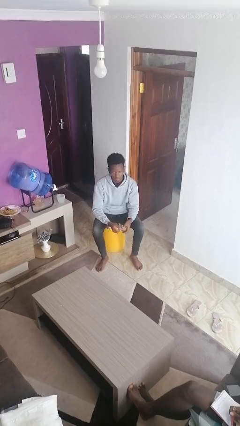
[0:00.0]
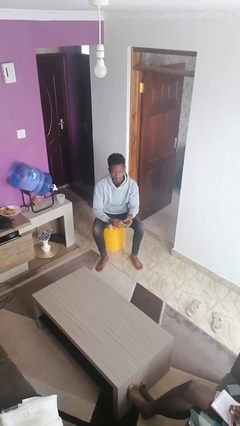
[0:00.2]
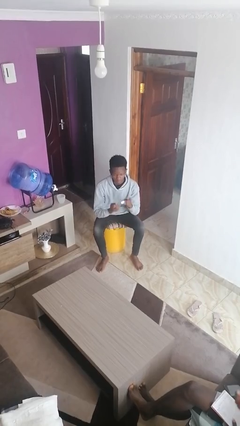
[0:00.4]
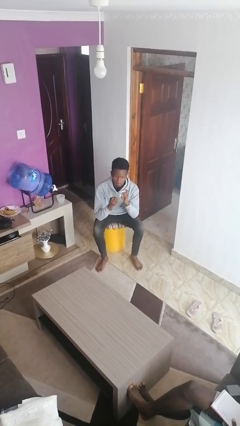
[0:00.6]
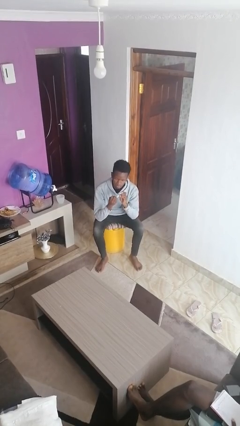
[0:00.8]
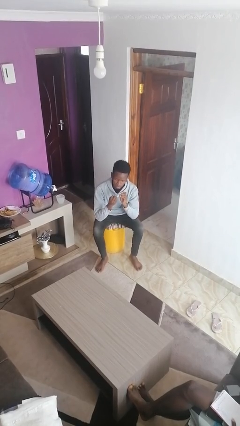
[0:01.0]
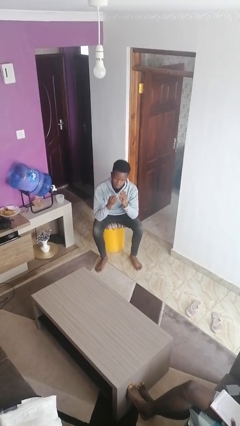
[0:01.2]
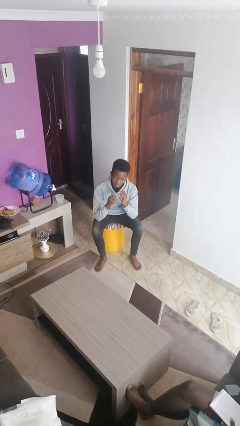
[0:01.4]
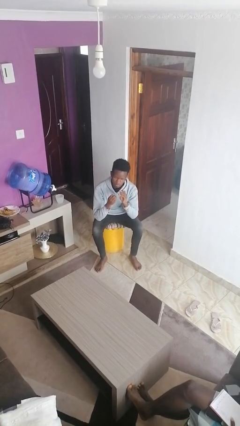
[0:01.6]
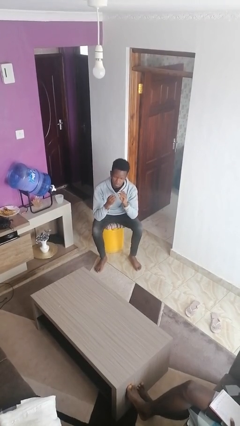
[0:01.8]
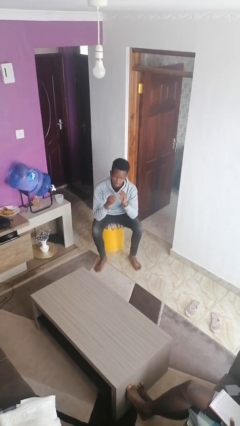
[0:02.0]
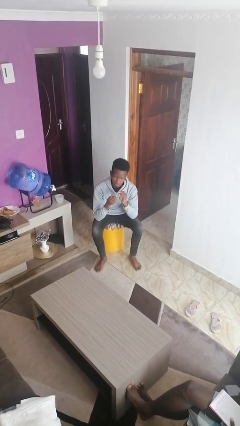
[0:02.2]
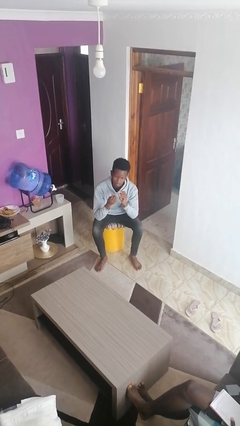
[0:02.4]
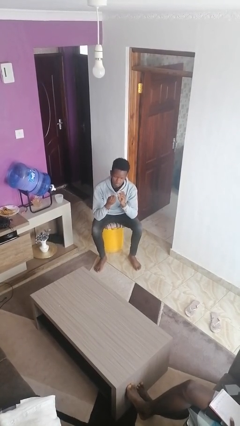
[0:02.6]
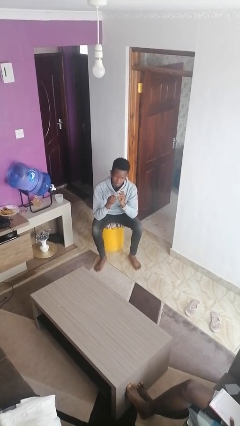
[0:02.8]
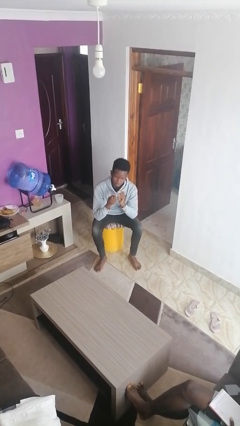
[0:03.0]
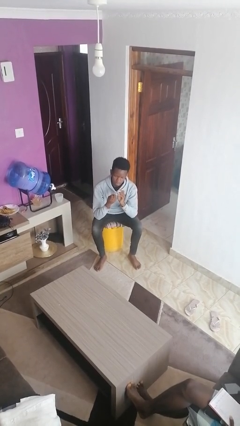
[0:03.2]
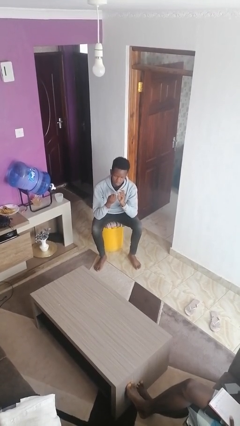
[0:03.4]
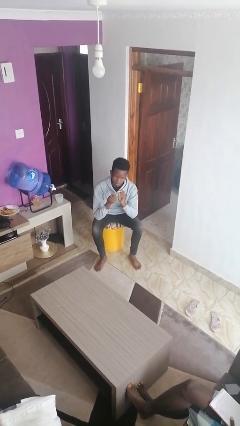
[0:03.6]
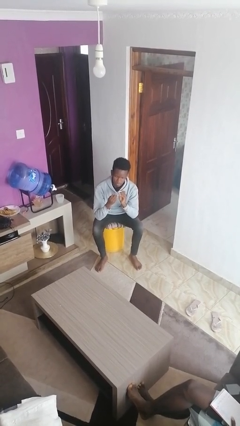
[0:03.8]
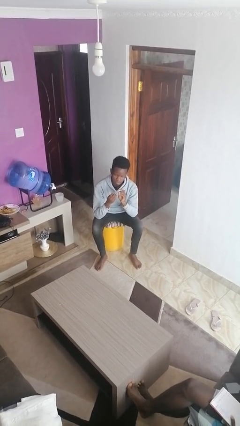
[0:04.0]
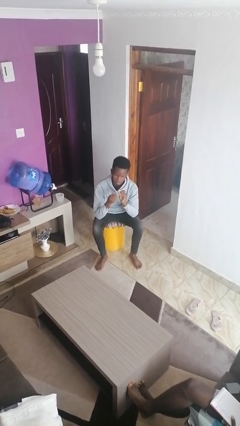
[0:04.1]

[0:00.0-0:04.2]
person clips fingernails

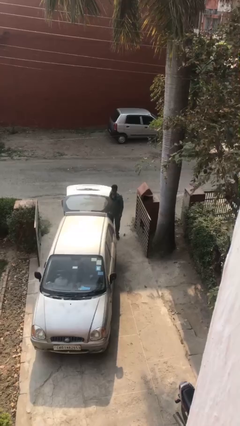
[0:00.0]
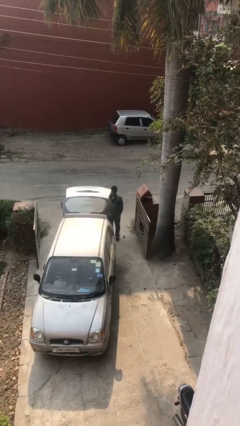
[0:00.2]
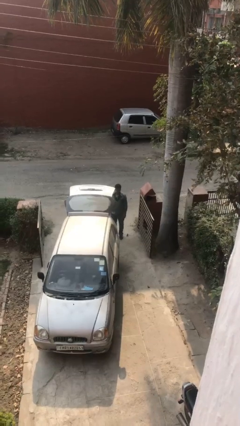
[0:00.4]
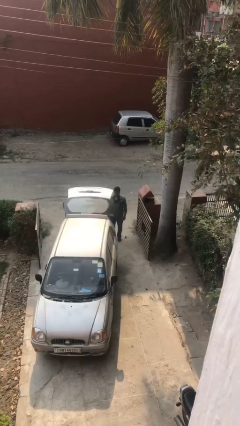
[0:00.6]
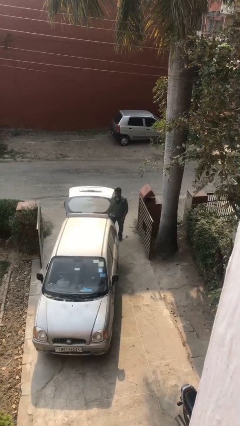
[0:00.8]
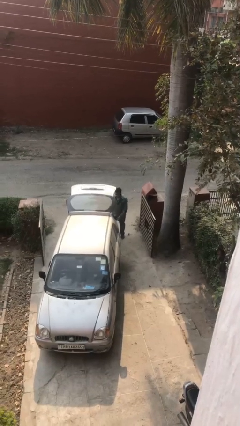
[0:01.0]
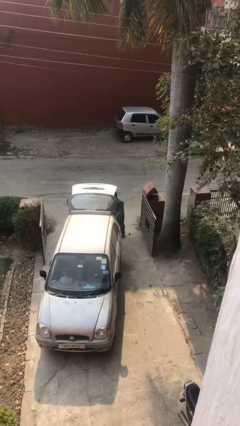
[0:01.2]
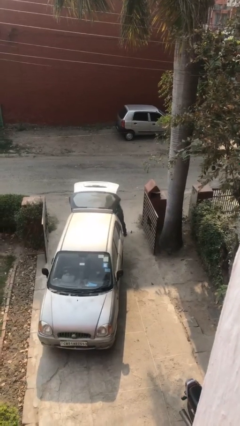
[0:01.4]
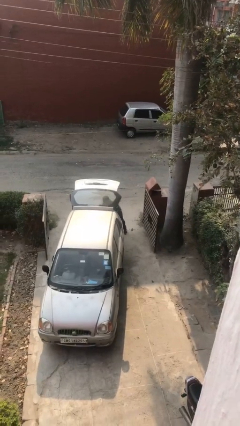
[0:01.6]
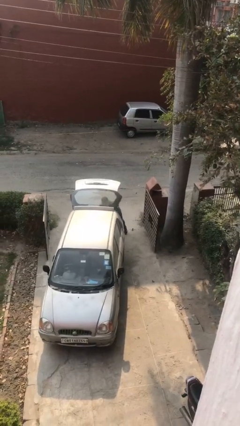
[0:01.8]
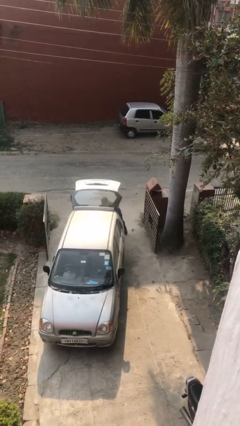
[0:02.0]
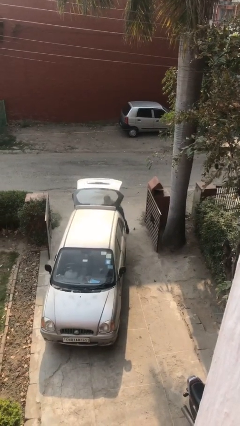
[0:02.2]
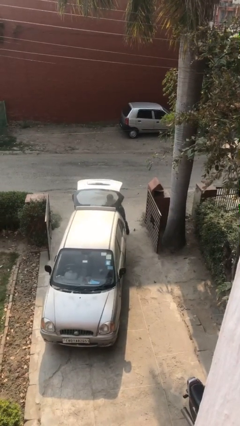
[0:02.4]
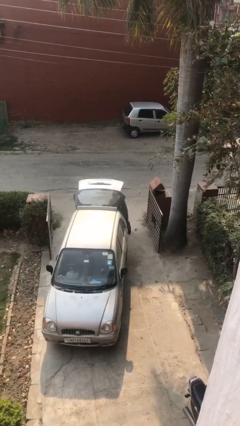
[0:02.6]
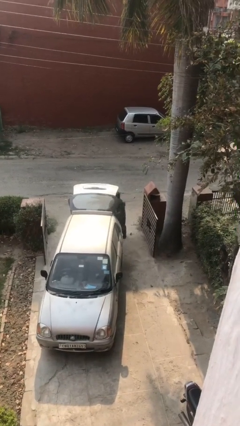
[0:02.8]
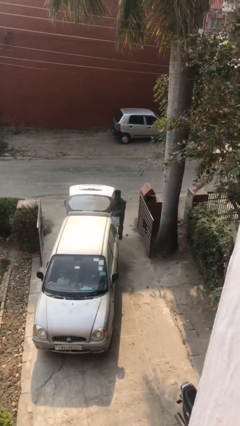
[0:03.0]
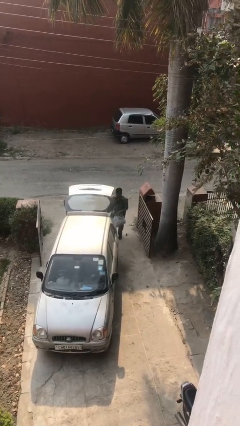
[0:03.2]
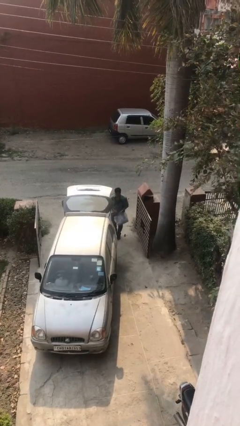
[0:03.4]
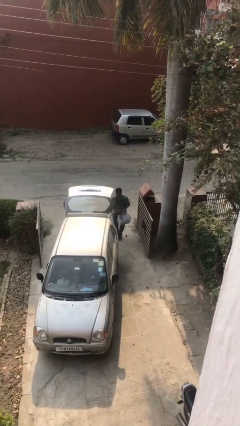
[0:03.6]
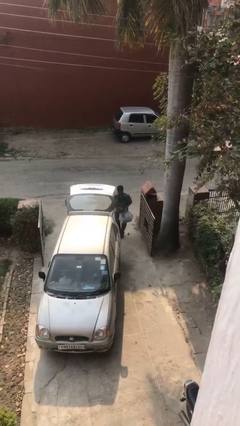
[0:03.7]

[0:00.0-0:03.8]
person unloads car

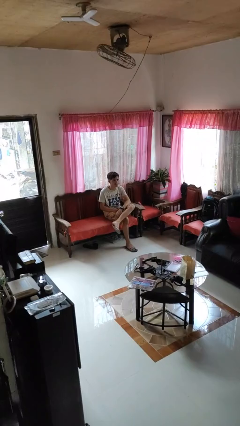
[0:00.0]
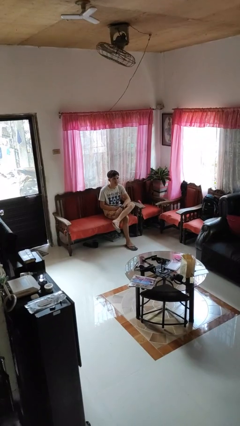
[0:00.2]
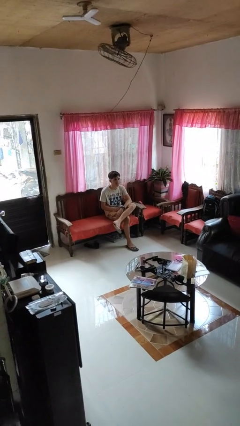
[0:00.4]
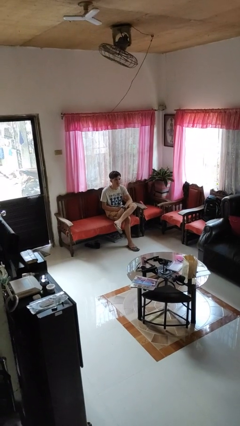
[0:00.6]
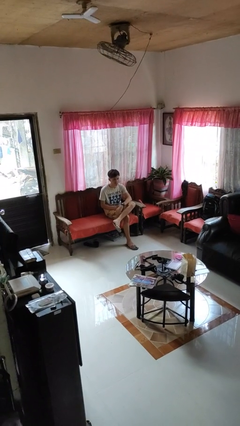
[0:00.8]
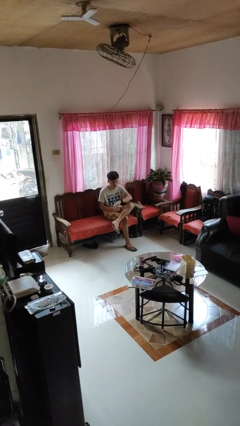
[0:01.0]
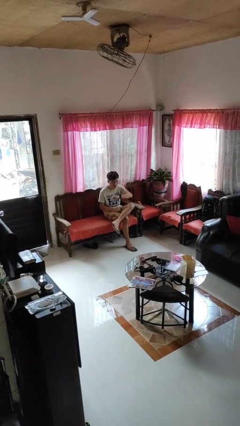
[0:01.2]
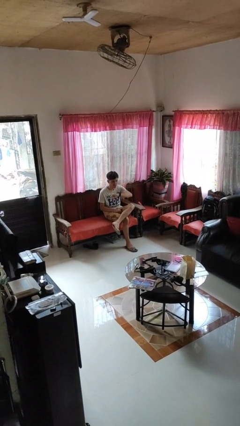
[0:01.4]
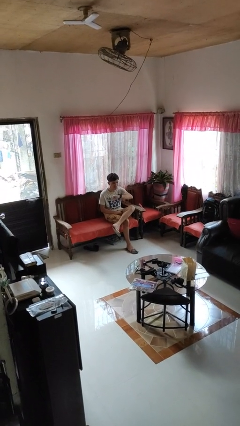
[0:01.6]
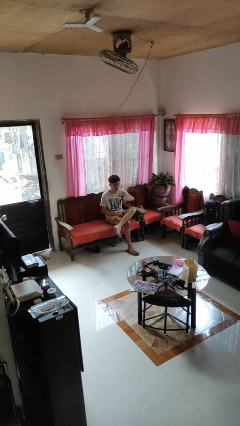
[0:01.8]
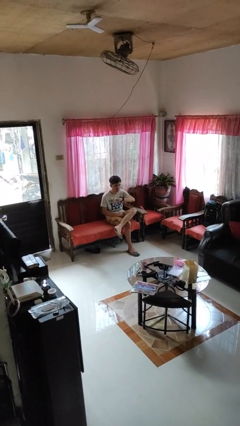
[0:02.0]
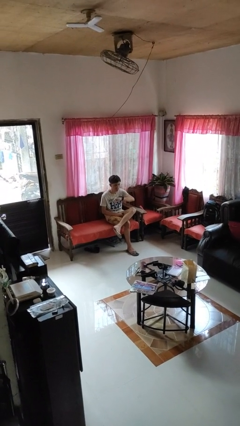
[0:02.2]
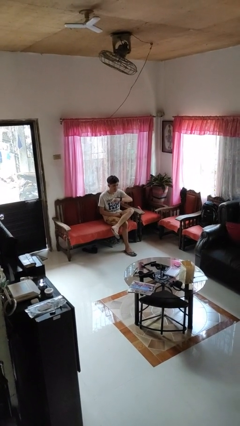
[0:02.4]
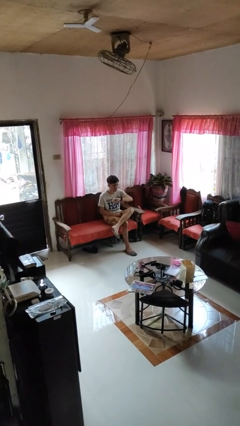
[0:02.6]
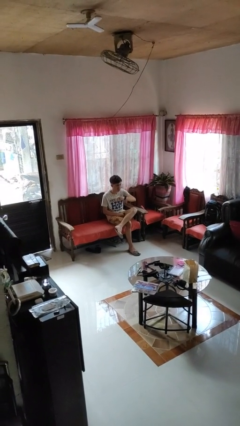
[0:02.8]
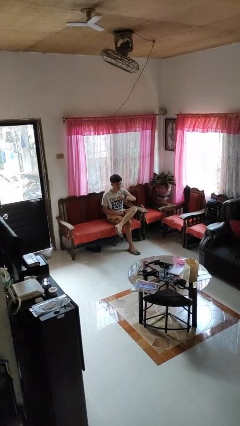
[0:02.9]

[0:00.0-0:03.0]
person looks at wristwatch

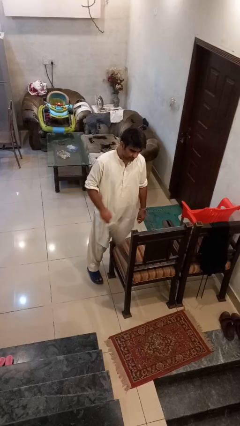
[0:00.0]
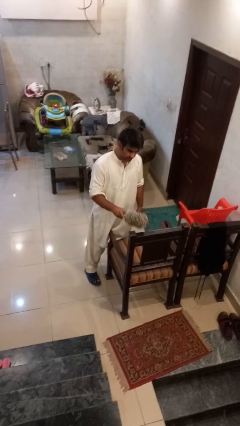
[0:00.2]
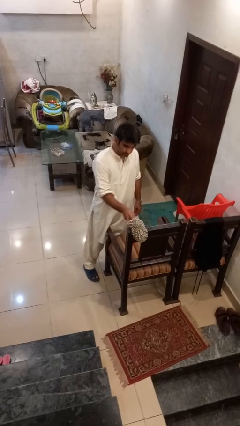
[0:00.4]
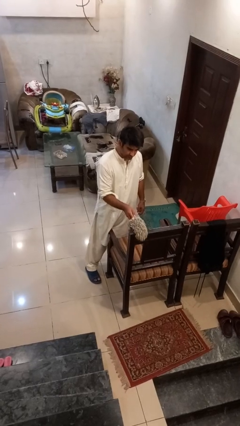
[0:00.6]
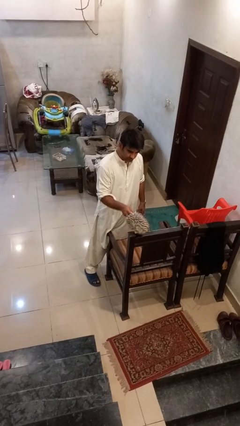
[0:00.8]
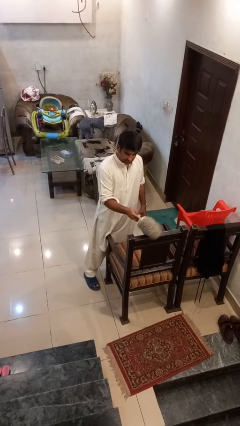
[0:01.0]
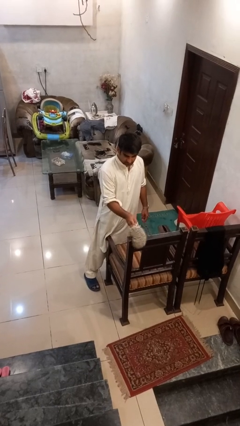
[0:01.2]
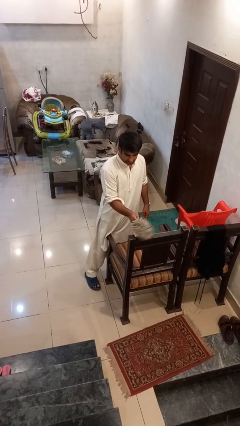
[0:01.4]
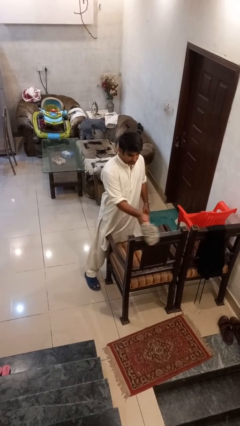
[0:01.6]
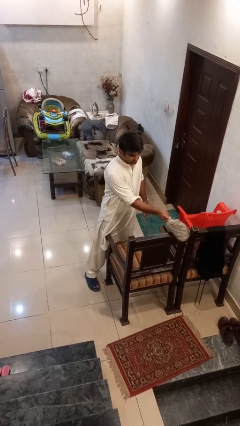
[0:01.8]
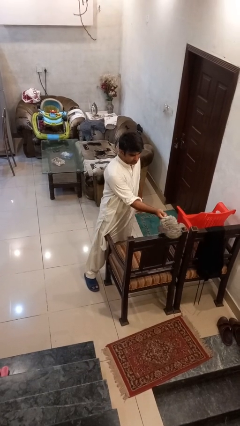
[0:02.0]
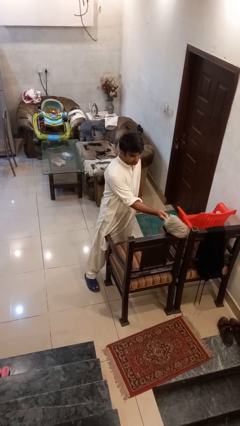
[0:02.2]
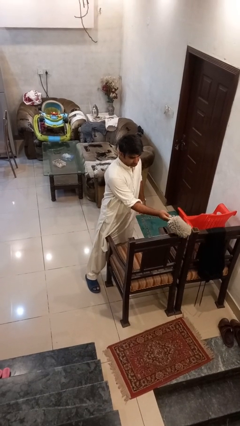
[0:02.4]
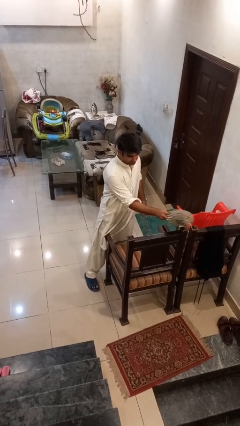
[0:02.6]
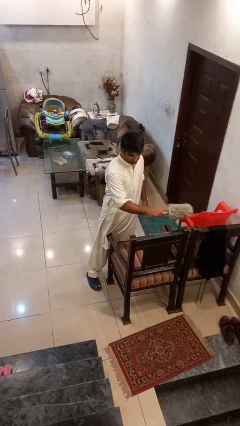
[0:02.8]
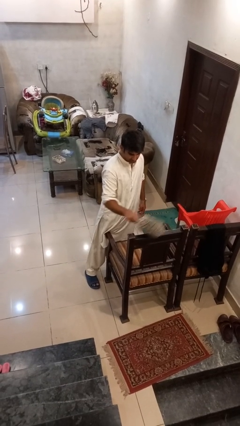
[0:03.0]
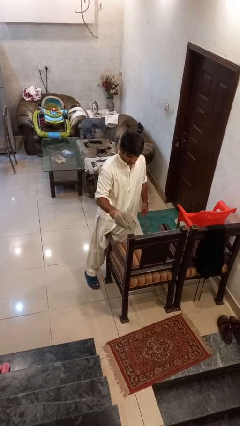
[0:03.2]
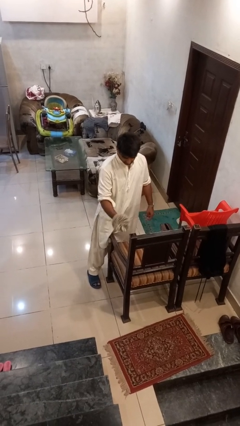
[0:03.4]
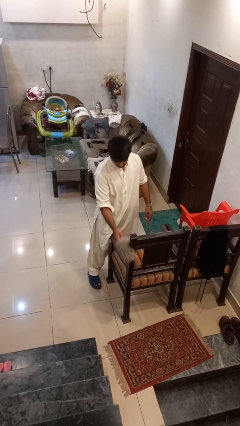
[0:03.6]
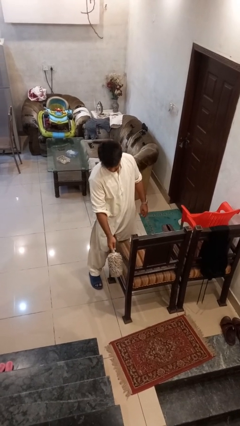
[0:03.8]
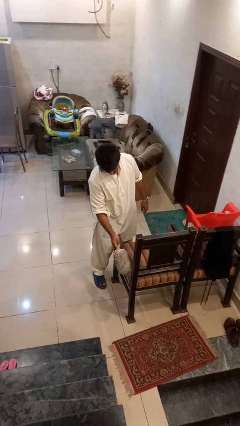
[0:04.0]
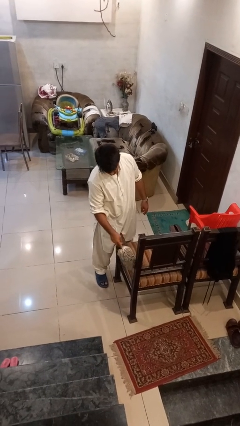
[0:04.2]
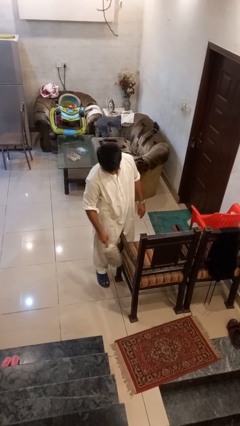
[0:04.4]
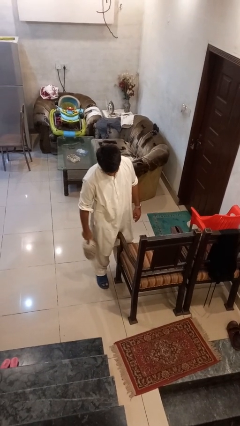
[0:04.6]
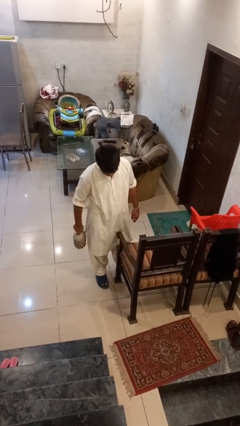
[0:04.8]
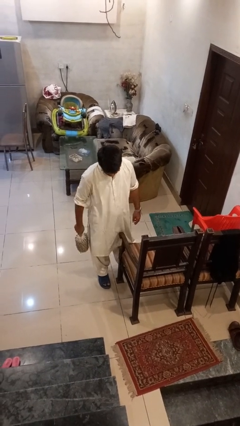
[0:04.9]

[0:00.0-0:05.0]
person dusts furniture

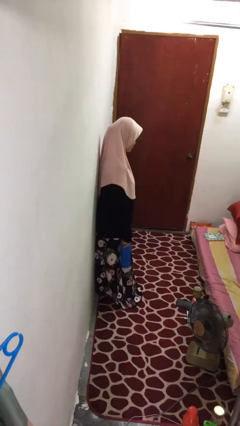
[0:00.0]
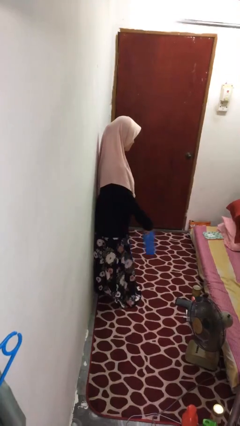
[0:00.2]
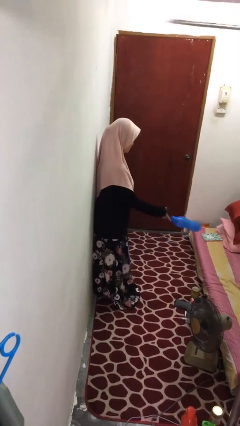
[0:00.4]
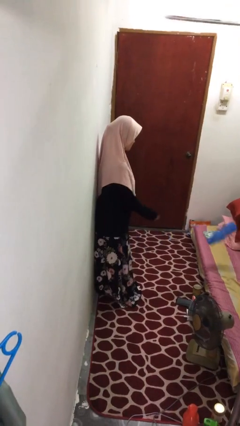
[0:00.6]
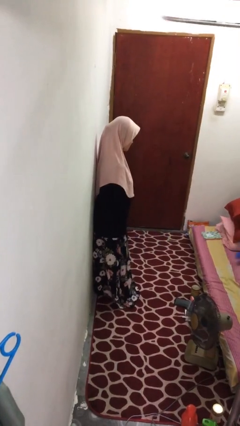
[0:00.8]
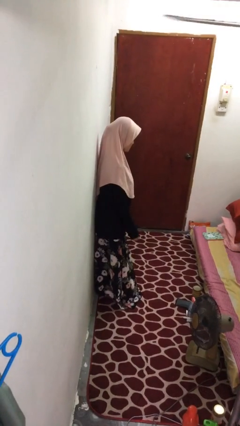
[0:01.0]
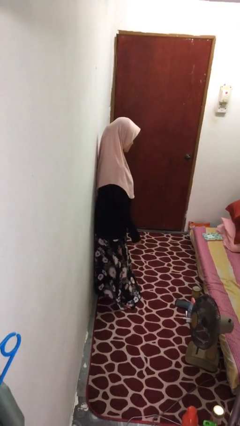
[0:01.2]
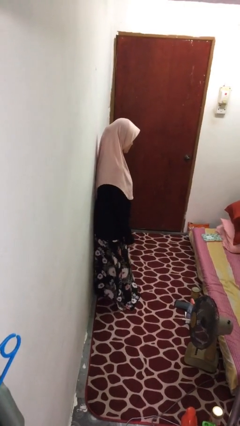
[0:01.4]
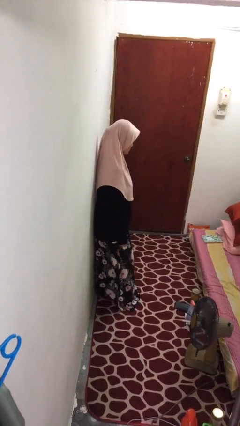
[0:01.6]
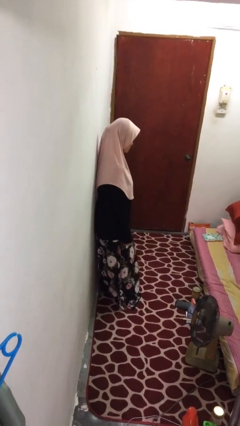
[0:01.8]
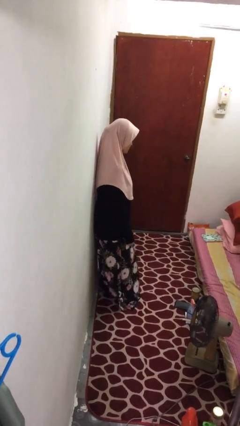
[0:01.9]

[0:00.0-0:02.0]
person throws object on bed
